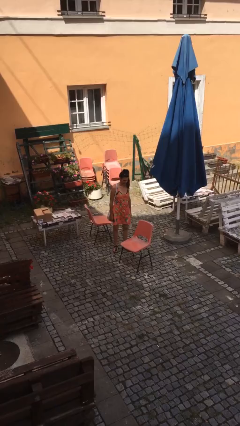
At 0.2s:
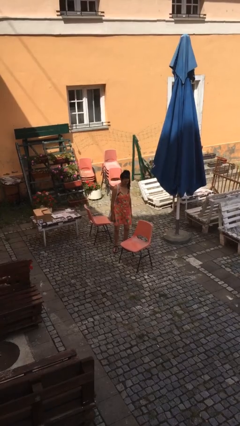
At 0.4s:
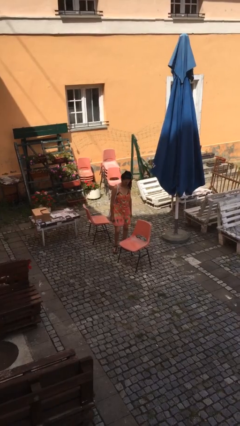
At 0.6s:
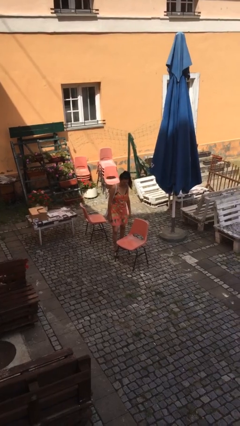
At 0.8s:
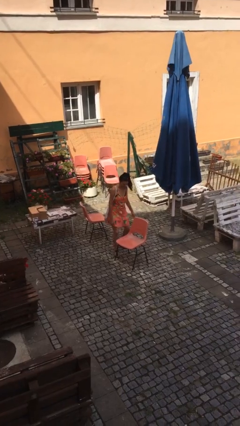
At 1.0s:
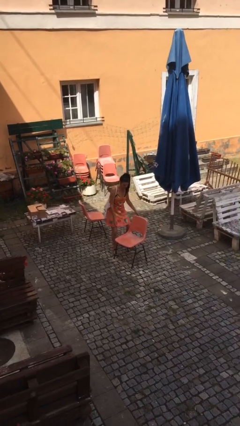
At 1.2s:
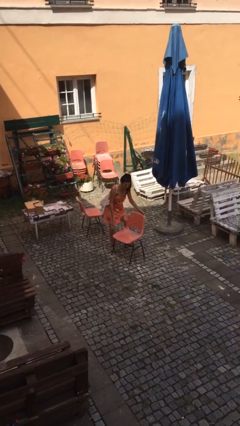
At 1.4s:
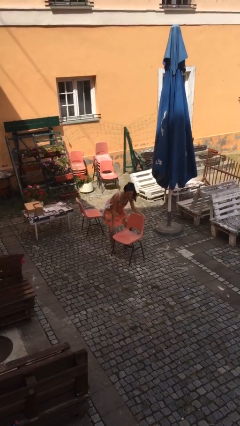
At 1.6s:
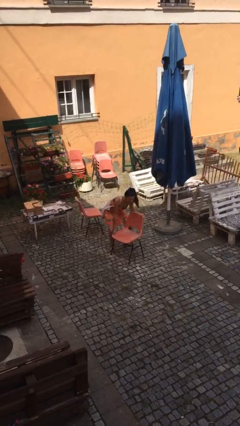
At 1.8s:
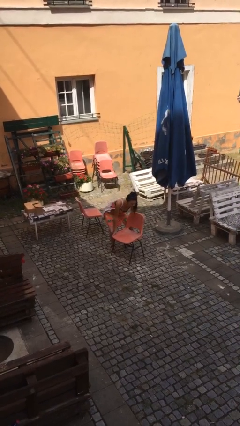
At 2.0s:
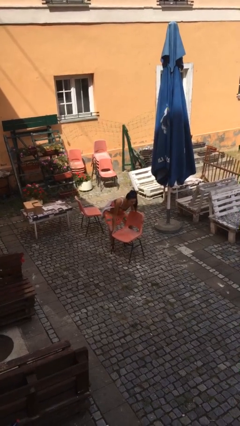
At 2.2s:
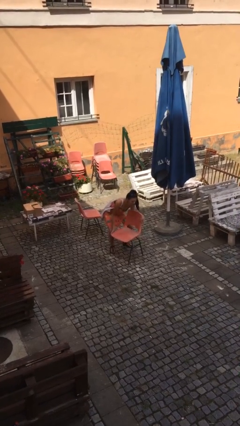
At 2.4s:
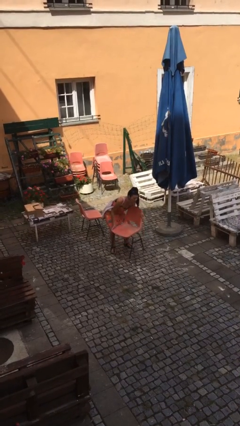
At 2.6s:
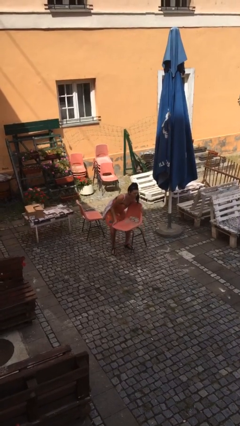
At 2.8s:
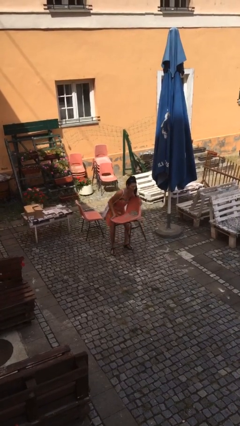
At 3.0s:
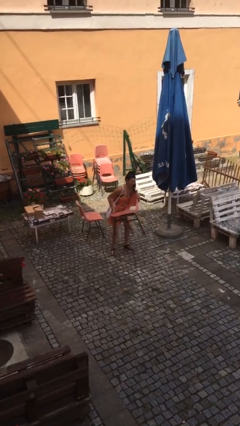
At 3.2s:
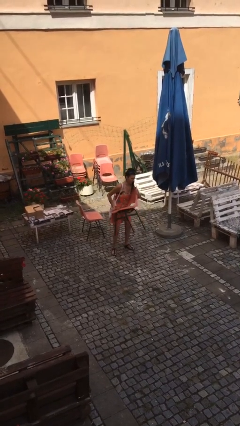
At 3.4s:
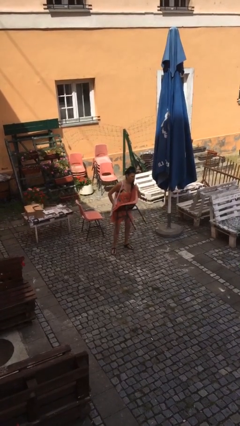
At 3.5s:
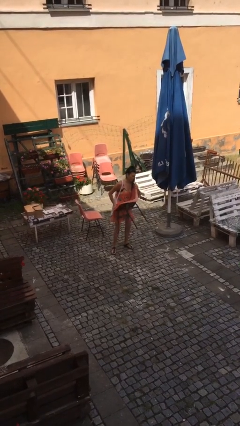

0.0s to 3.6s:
person picks up object from floor

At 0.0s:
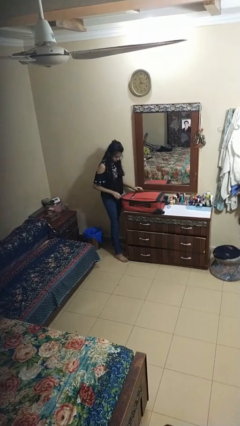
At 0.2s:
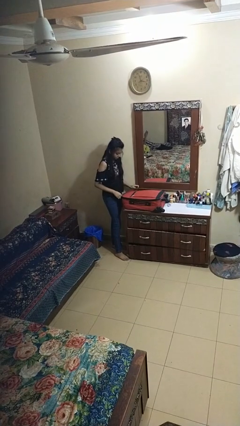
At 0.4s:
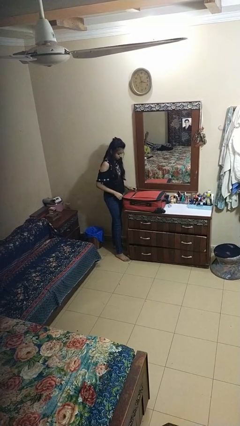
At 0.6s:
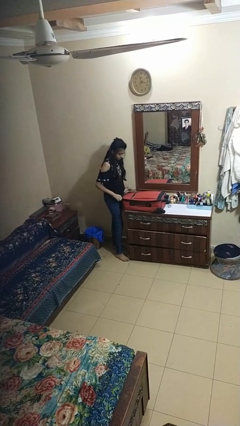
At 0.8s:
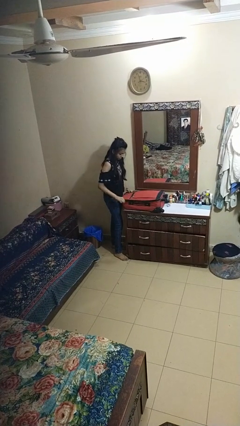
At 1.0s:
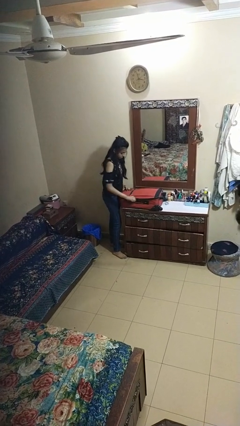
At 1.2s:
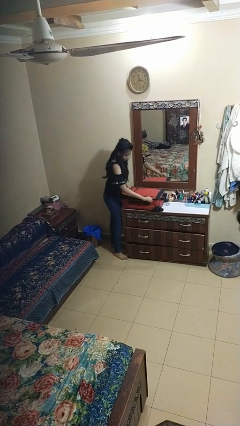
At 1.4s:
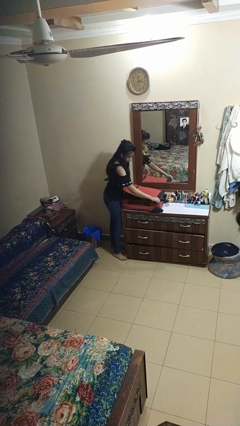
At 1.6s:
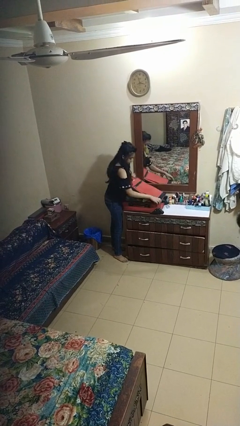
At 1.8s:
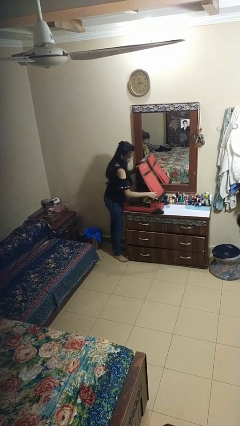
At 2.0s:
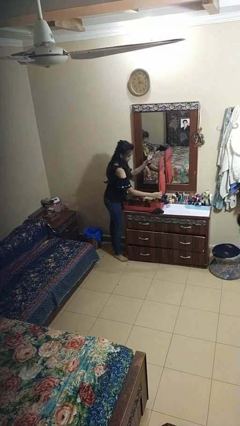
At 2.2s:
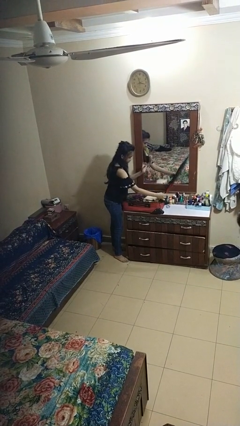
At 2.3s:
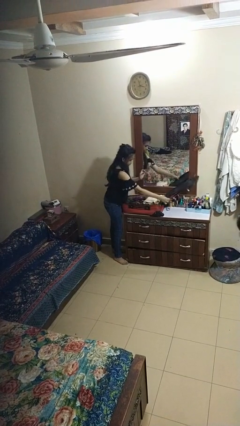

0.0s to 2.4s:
person opens suitcase

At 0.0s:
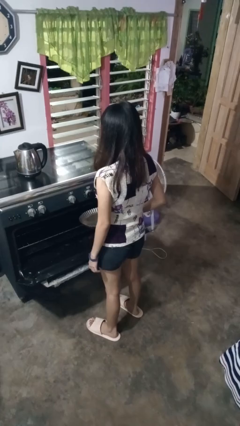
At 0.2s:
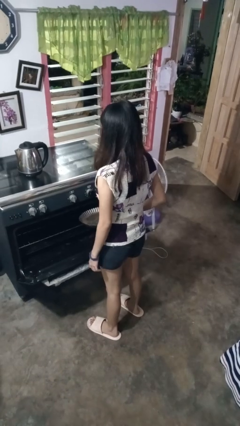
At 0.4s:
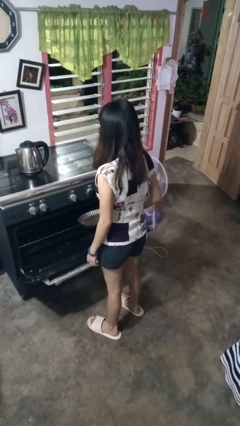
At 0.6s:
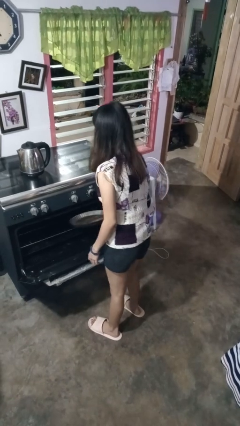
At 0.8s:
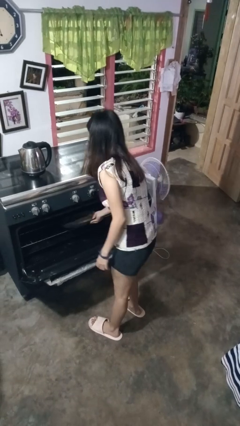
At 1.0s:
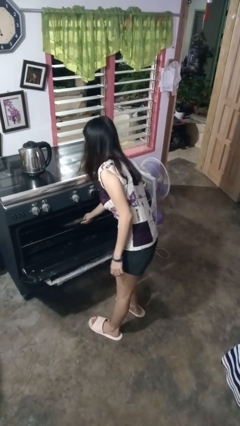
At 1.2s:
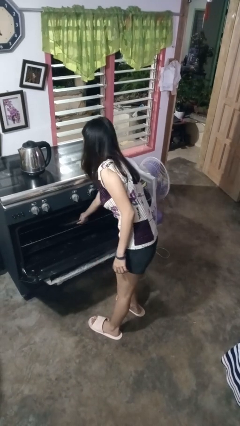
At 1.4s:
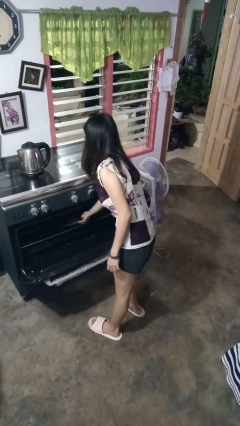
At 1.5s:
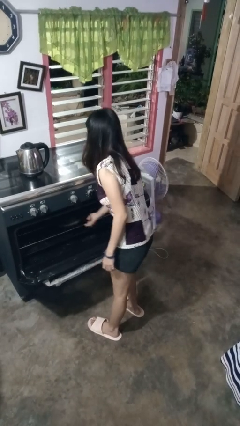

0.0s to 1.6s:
person puts object into oven

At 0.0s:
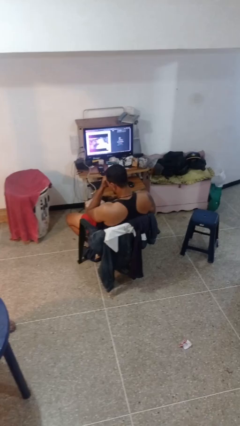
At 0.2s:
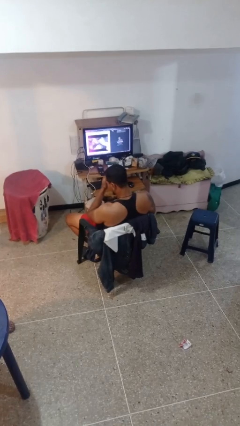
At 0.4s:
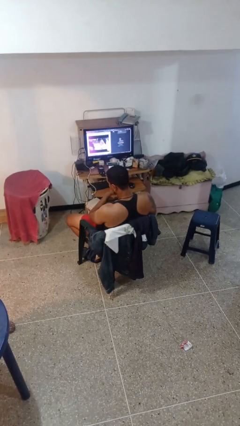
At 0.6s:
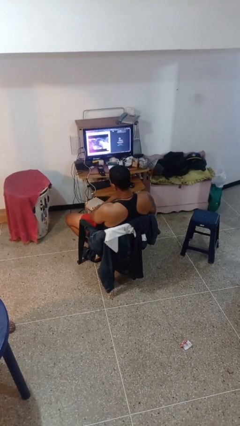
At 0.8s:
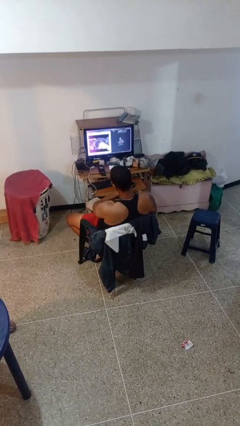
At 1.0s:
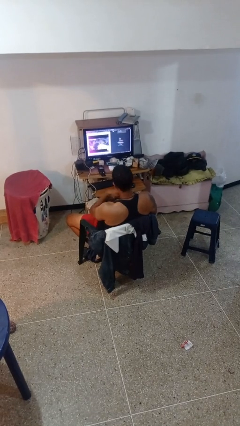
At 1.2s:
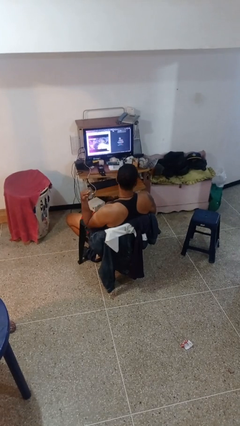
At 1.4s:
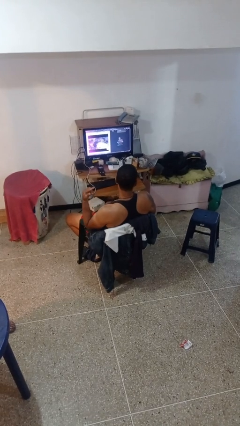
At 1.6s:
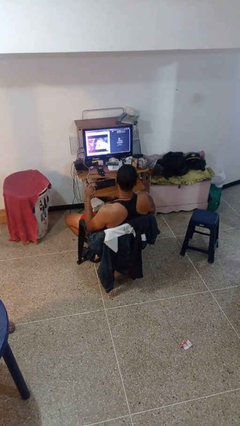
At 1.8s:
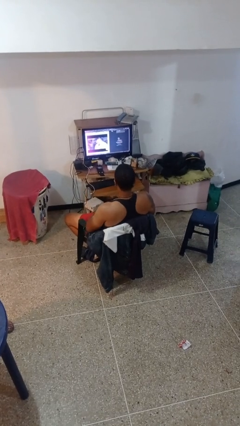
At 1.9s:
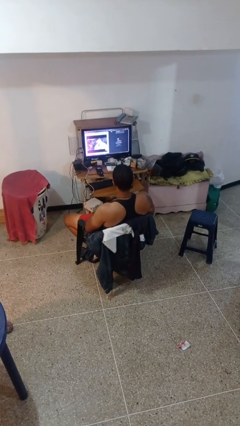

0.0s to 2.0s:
person gestures cut

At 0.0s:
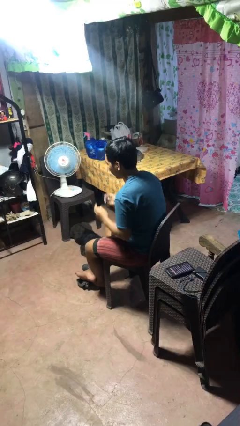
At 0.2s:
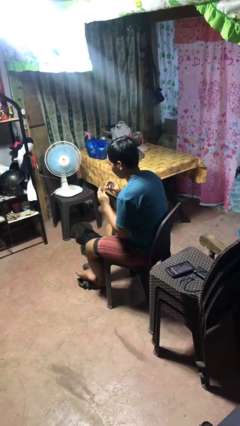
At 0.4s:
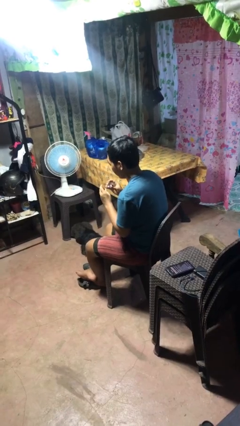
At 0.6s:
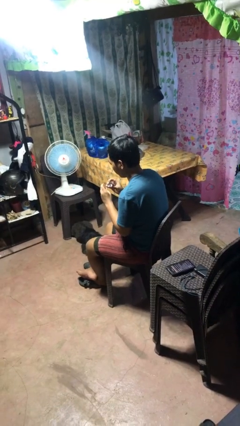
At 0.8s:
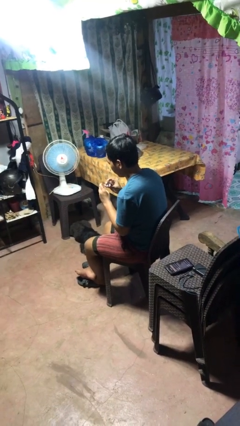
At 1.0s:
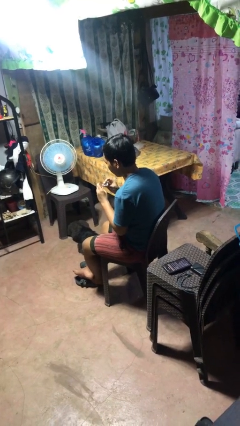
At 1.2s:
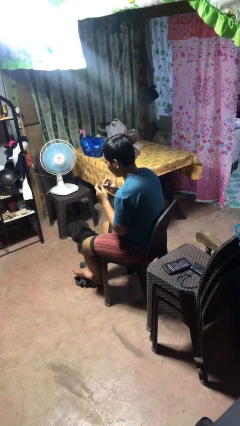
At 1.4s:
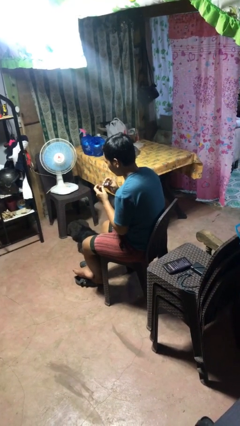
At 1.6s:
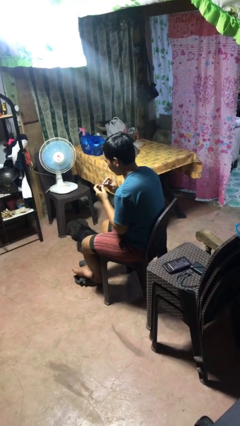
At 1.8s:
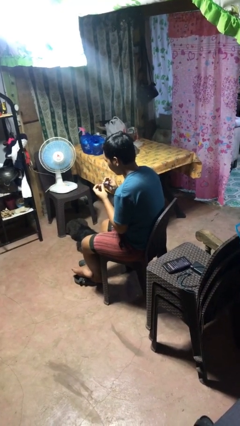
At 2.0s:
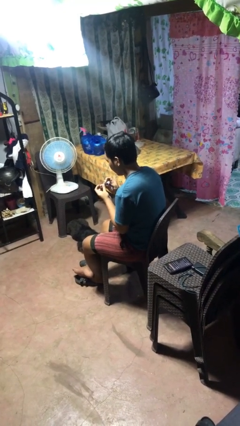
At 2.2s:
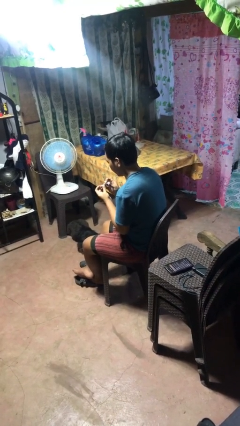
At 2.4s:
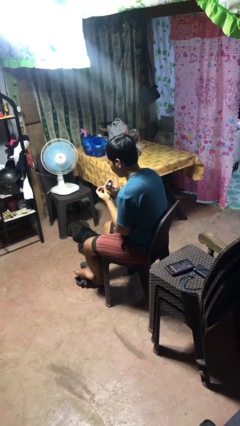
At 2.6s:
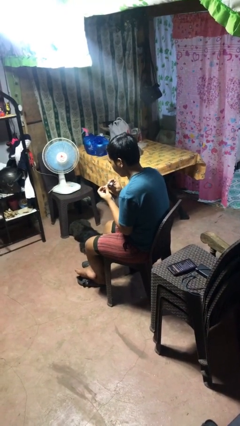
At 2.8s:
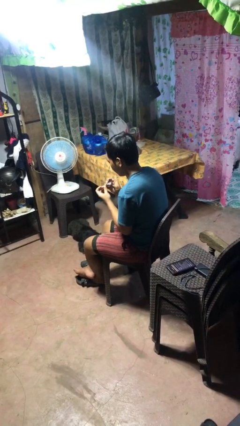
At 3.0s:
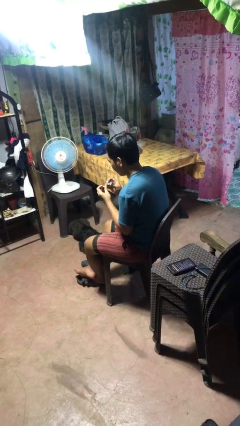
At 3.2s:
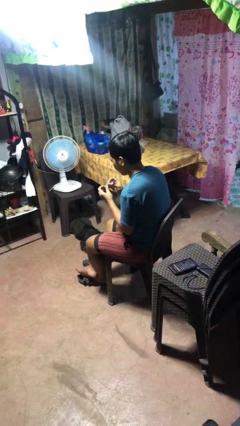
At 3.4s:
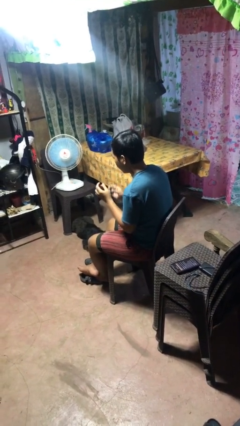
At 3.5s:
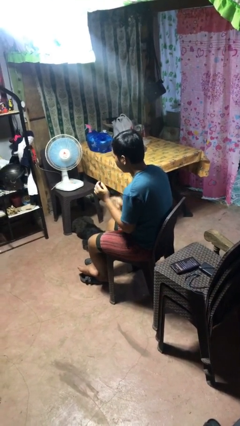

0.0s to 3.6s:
person clips fingernails

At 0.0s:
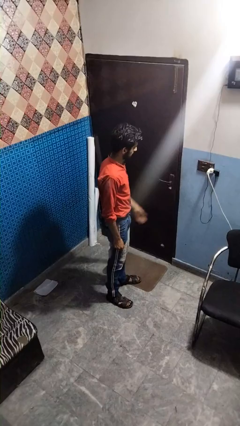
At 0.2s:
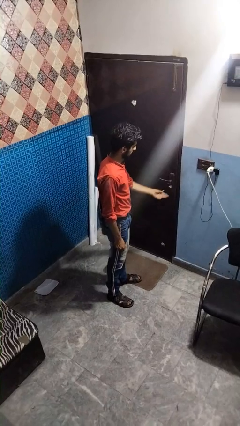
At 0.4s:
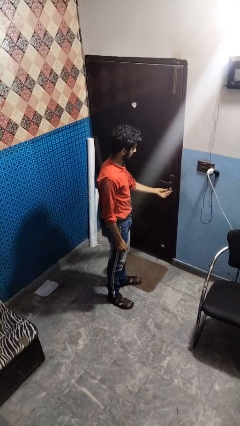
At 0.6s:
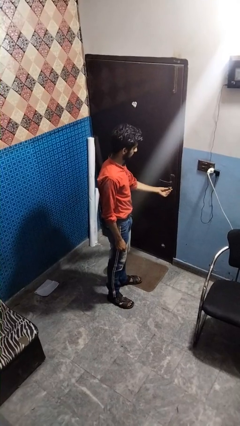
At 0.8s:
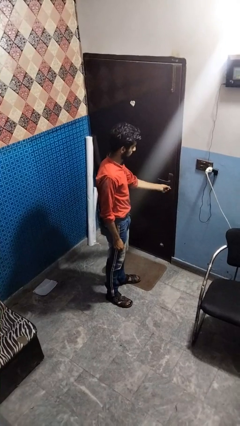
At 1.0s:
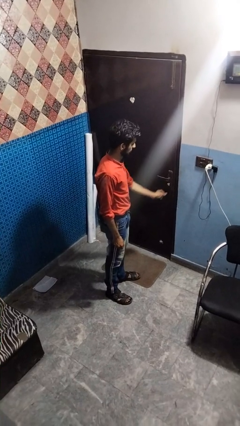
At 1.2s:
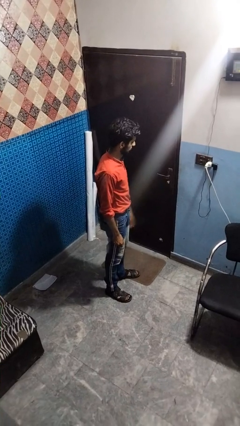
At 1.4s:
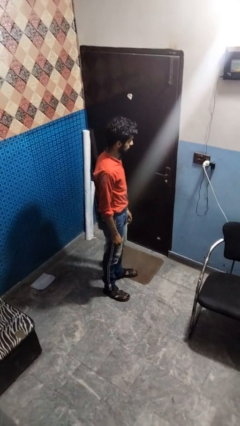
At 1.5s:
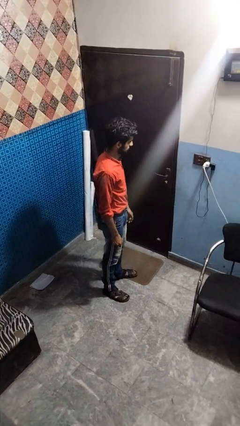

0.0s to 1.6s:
person locks door with keys

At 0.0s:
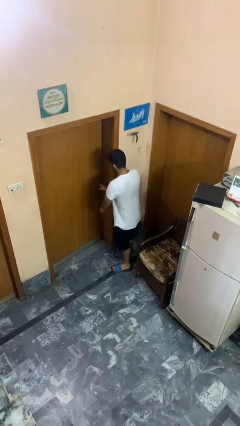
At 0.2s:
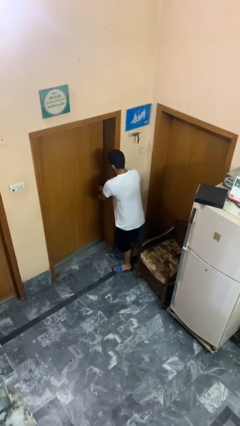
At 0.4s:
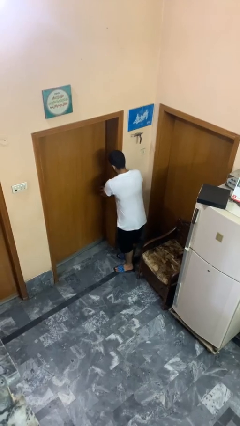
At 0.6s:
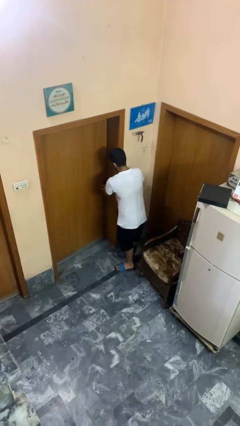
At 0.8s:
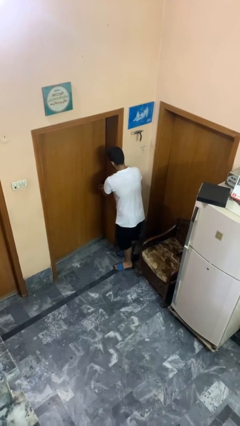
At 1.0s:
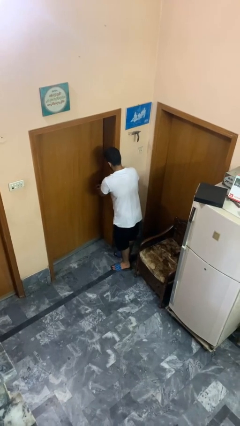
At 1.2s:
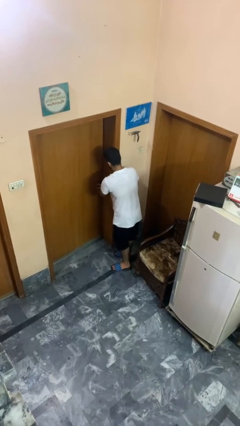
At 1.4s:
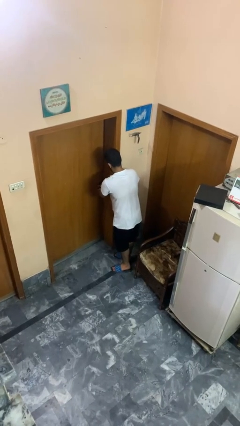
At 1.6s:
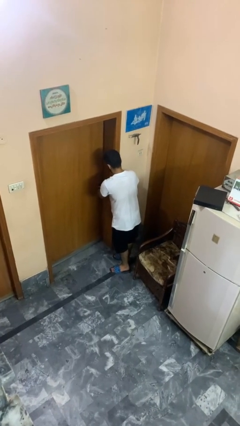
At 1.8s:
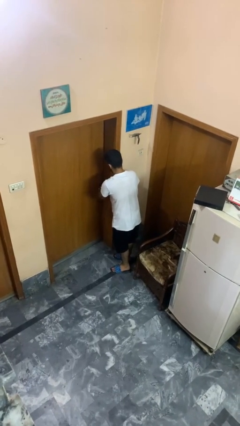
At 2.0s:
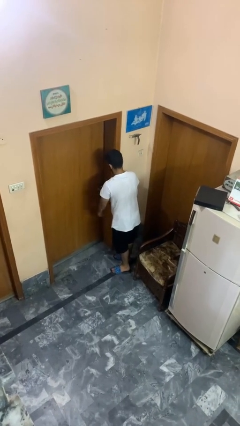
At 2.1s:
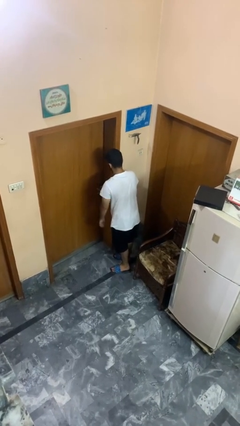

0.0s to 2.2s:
person unlocks door with keys
